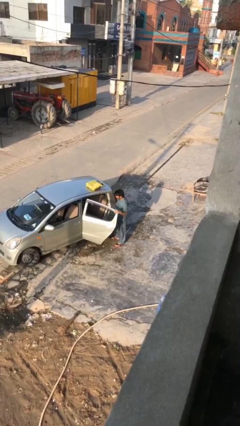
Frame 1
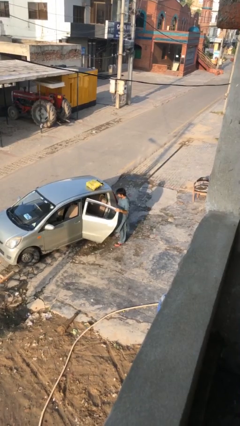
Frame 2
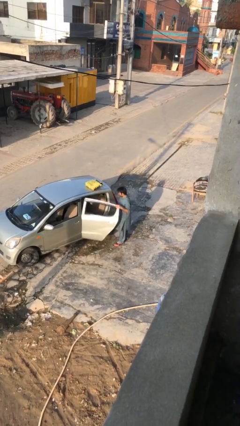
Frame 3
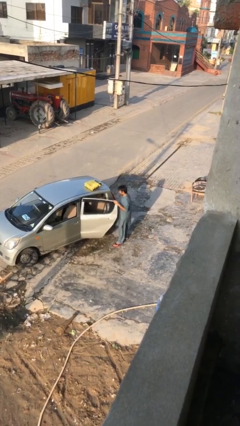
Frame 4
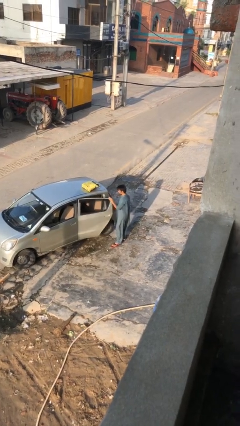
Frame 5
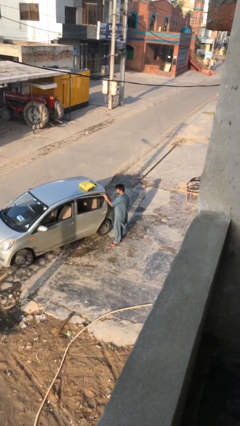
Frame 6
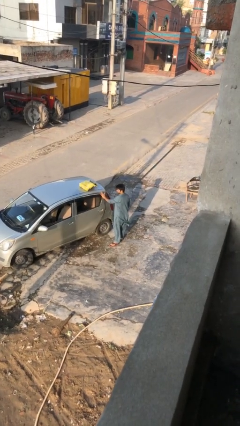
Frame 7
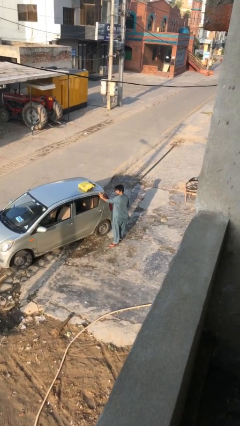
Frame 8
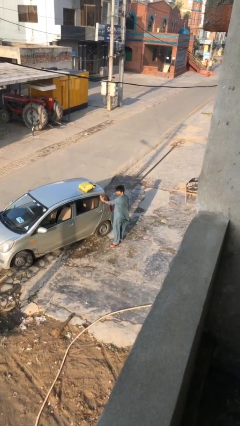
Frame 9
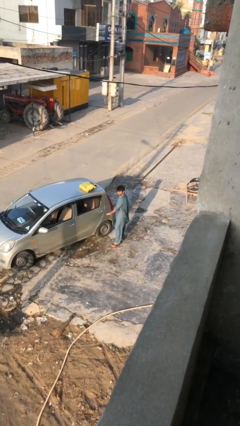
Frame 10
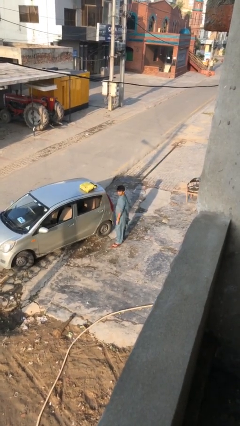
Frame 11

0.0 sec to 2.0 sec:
person closes car door

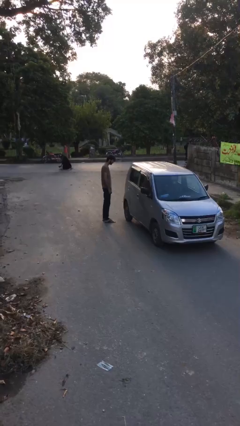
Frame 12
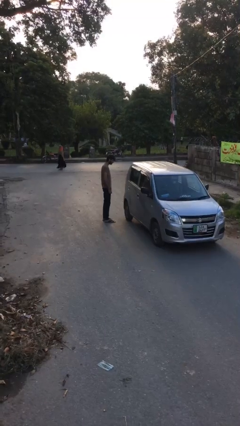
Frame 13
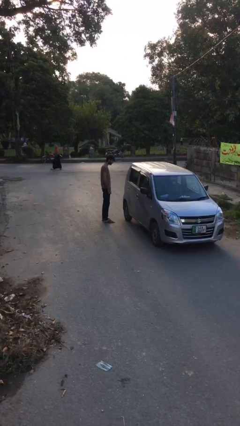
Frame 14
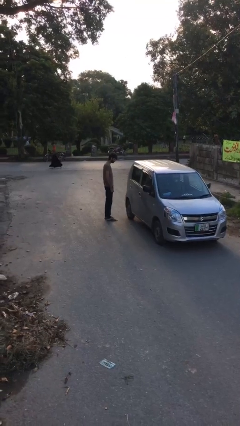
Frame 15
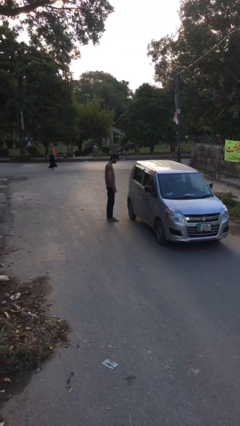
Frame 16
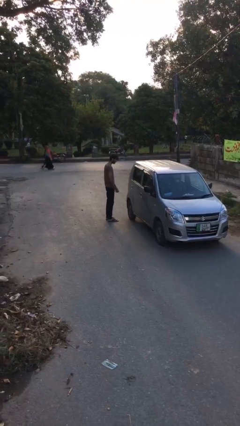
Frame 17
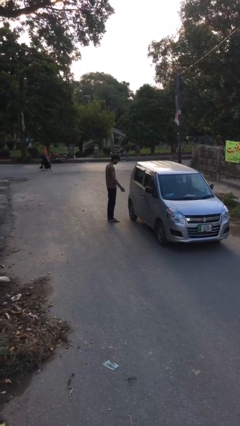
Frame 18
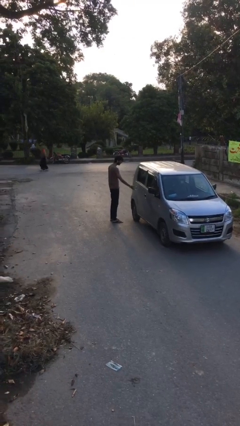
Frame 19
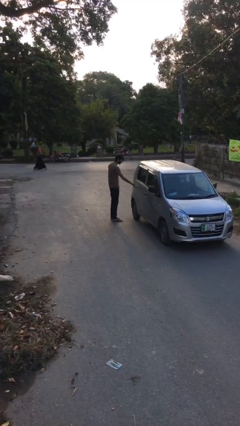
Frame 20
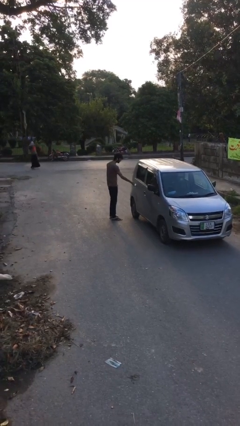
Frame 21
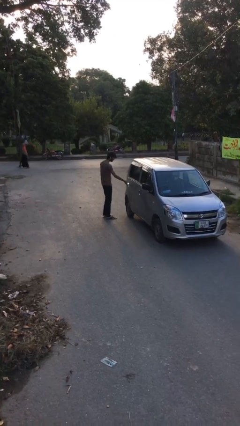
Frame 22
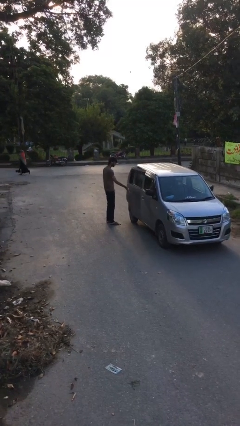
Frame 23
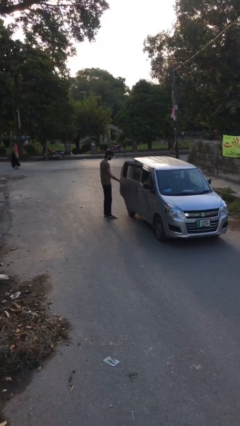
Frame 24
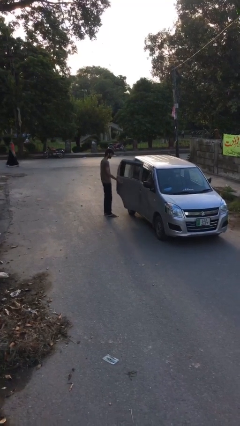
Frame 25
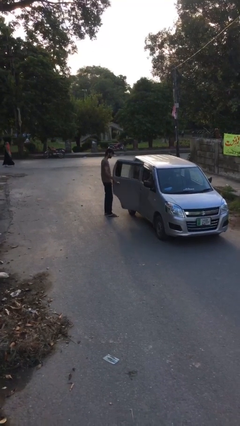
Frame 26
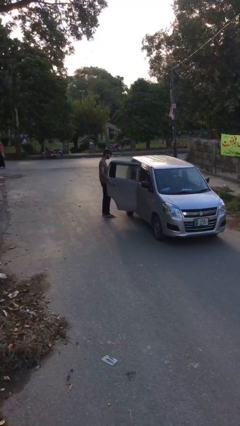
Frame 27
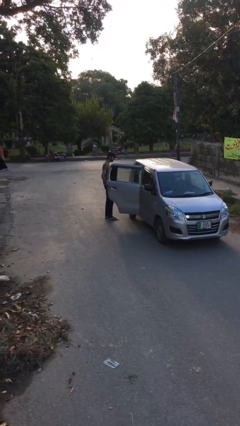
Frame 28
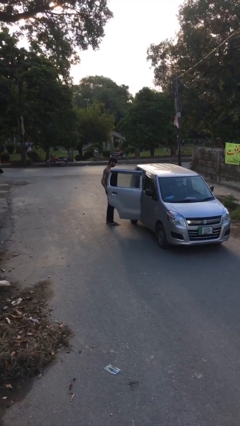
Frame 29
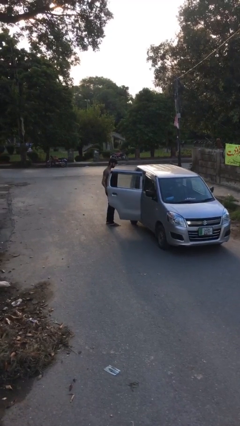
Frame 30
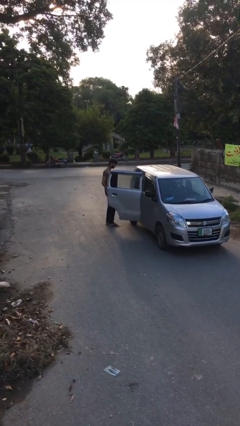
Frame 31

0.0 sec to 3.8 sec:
person opens car door

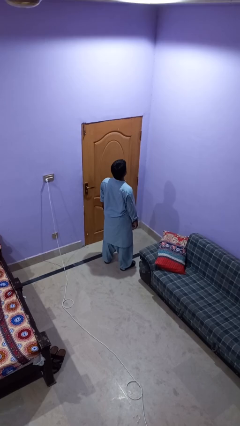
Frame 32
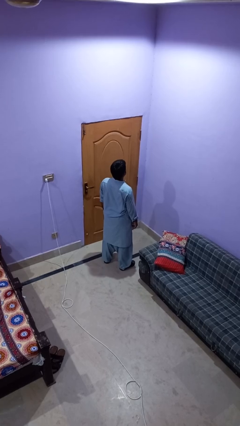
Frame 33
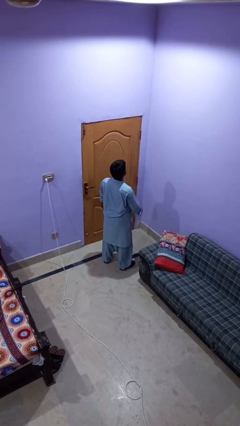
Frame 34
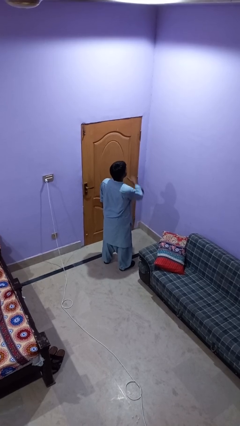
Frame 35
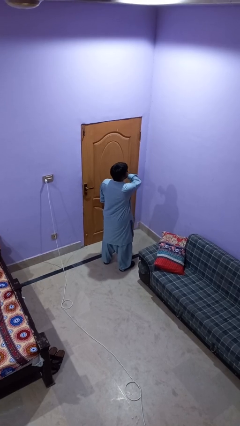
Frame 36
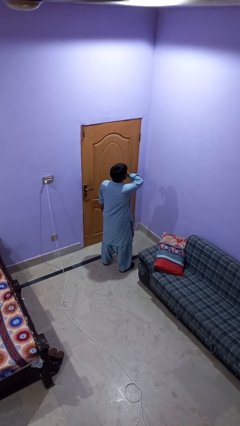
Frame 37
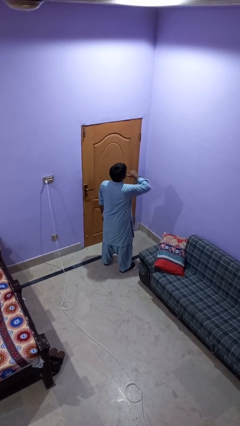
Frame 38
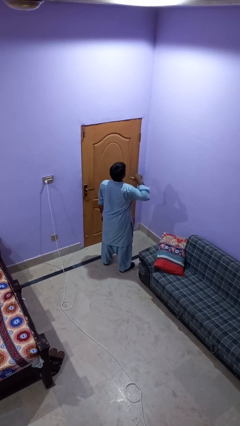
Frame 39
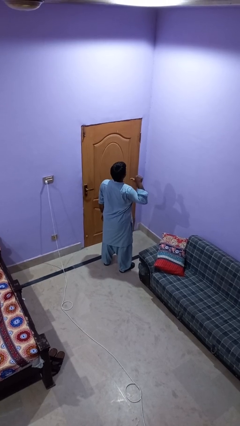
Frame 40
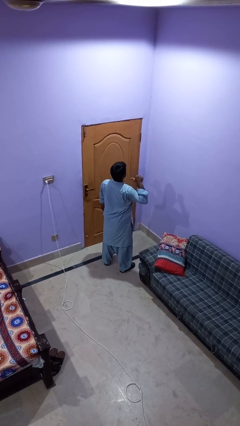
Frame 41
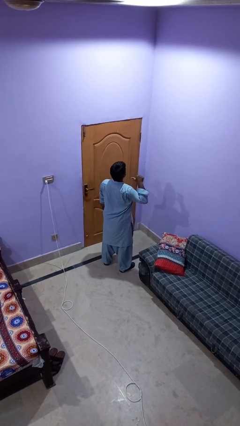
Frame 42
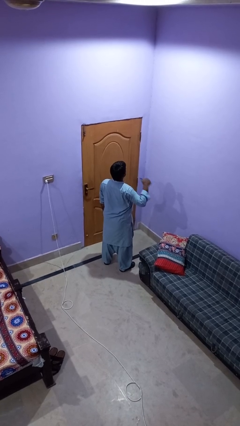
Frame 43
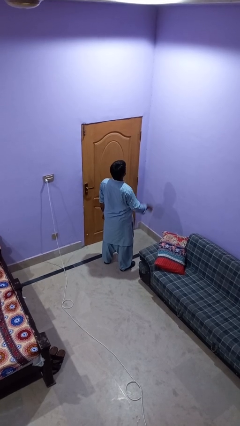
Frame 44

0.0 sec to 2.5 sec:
person gestures cut

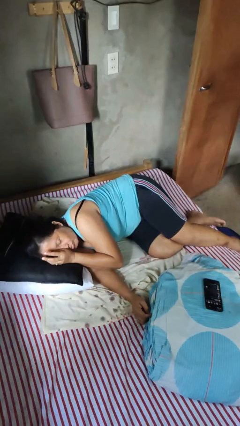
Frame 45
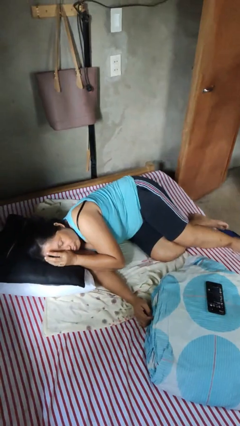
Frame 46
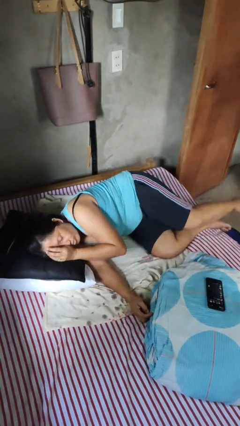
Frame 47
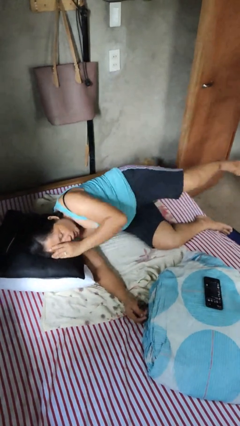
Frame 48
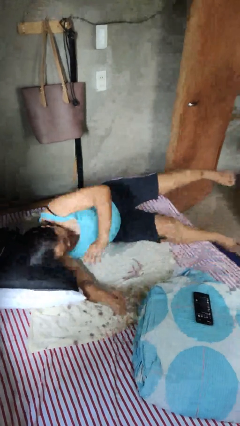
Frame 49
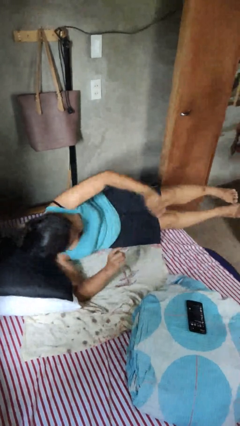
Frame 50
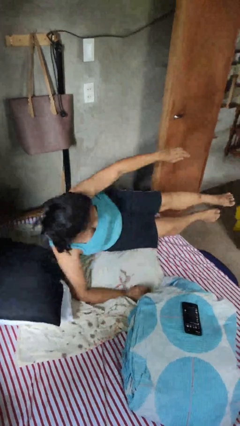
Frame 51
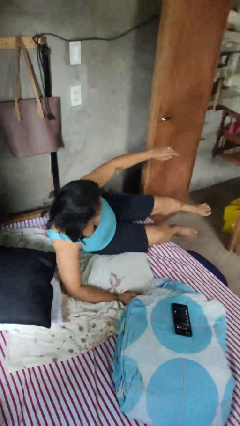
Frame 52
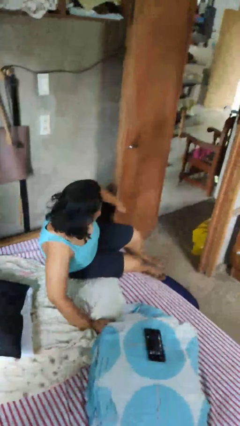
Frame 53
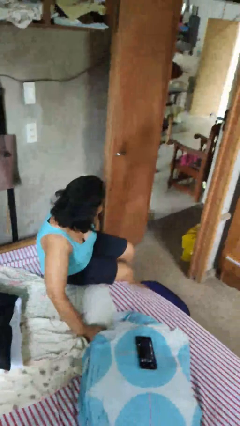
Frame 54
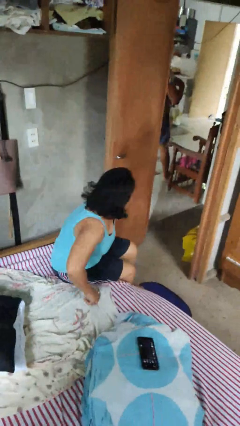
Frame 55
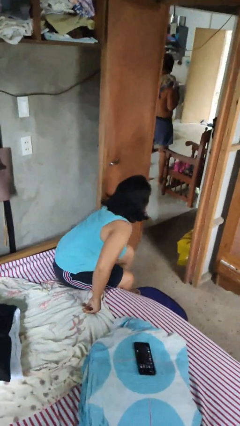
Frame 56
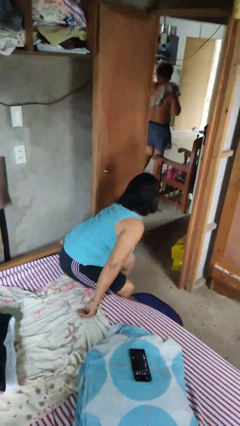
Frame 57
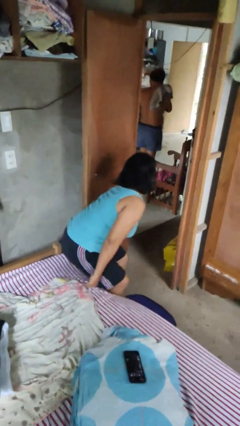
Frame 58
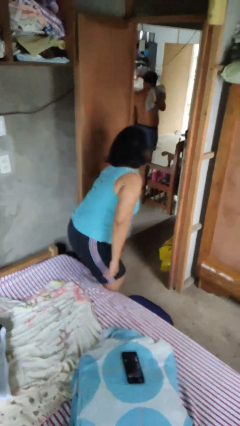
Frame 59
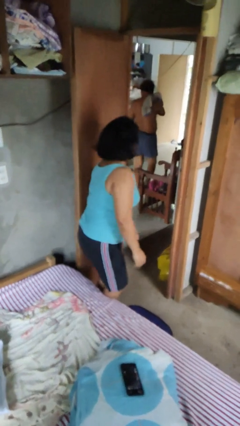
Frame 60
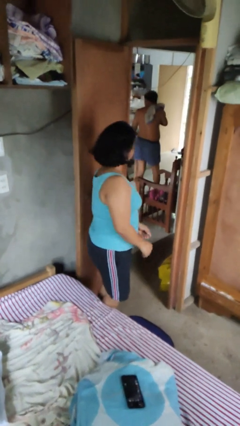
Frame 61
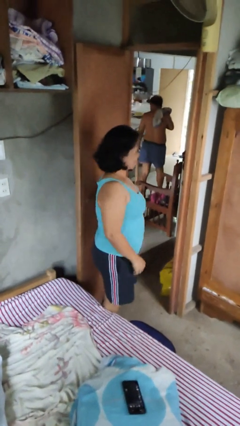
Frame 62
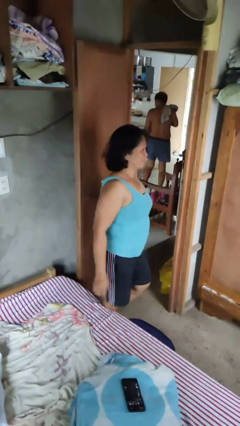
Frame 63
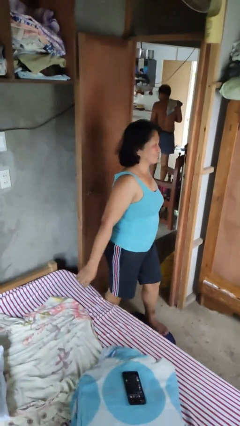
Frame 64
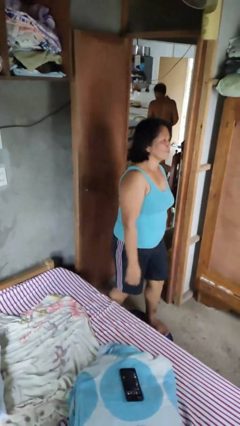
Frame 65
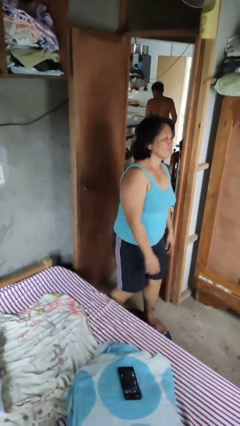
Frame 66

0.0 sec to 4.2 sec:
person stands up

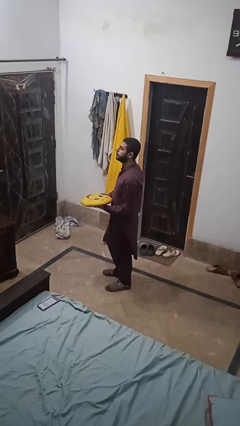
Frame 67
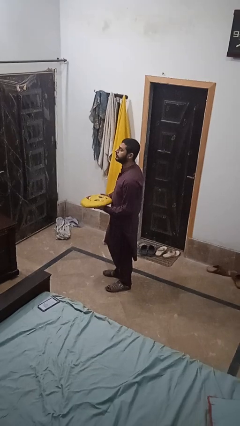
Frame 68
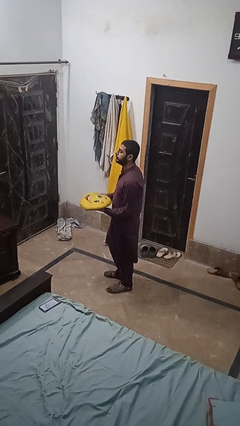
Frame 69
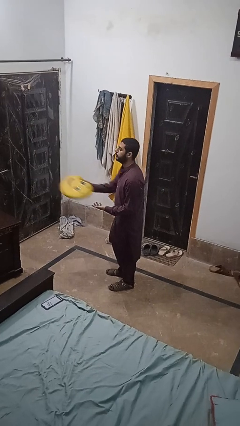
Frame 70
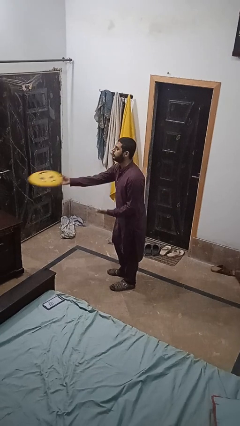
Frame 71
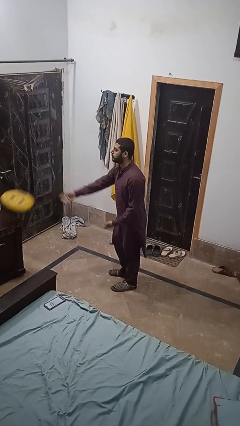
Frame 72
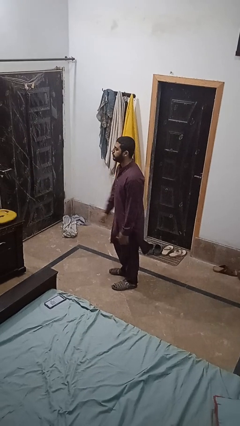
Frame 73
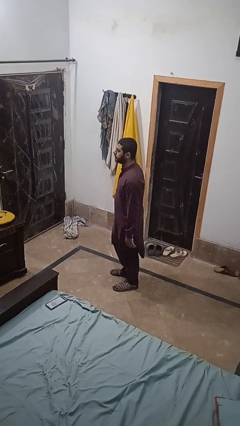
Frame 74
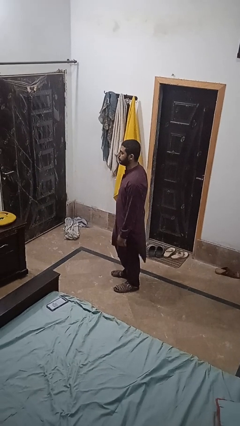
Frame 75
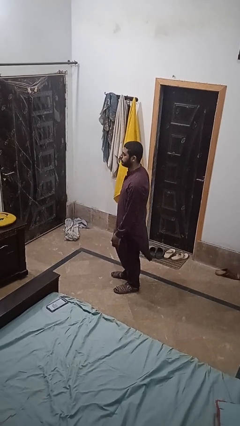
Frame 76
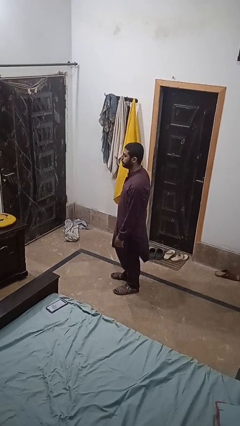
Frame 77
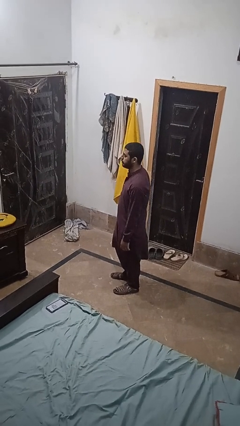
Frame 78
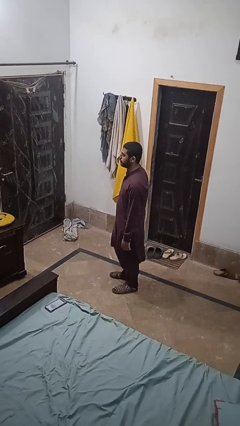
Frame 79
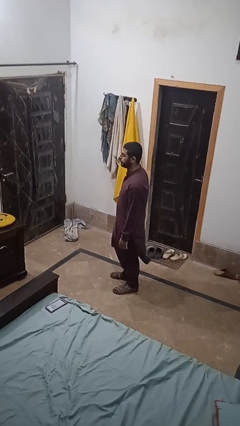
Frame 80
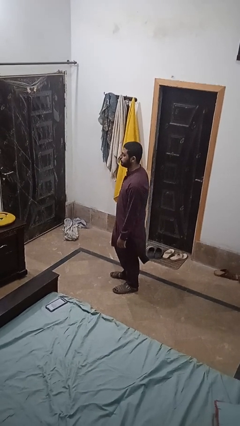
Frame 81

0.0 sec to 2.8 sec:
person throws object on table

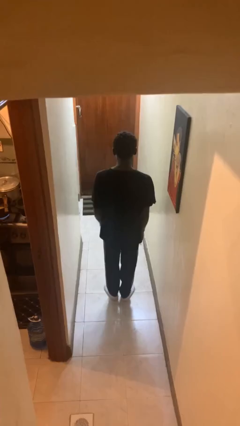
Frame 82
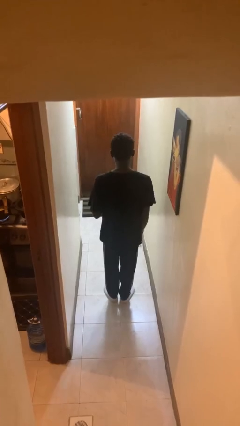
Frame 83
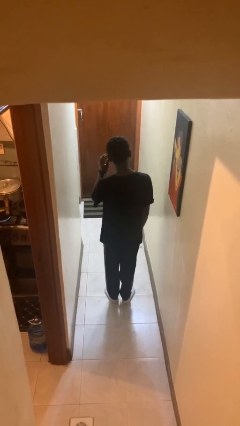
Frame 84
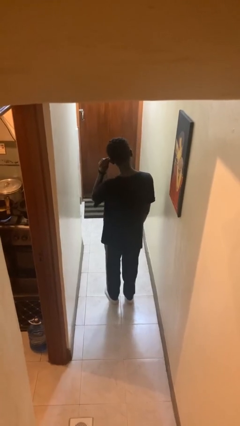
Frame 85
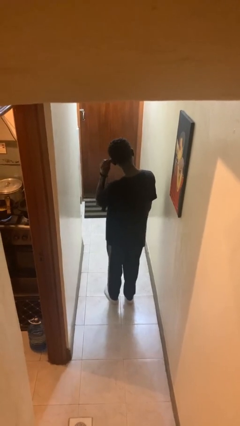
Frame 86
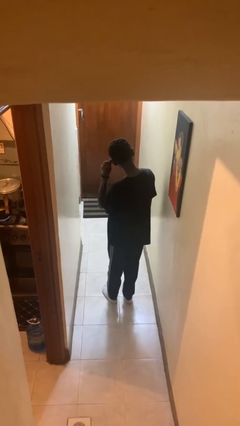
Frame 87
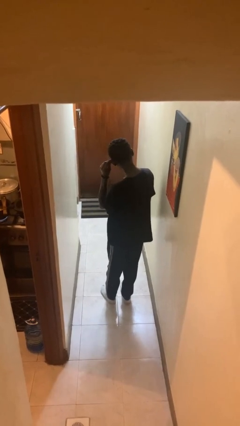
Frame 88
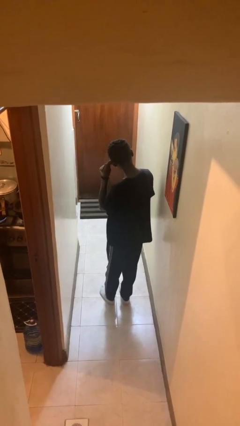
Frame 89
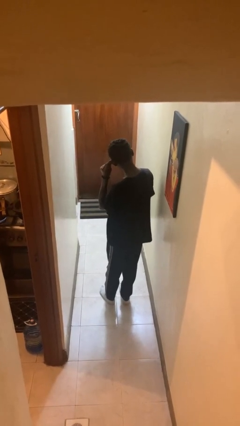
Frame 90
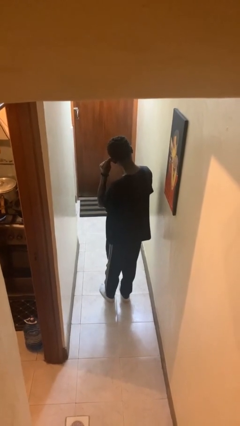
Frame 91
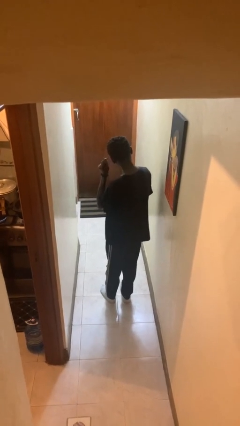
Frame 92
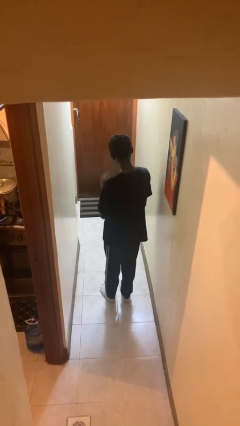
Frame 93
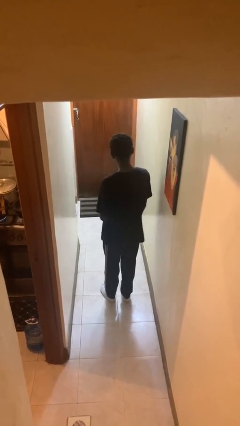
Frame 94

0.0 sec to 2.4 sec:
person touches earlobe
